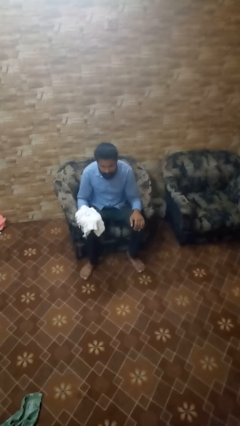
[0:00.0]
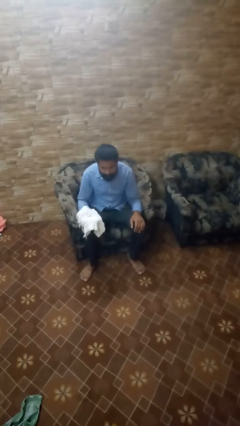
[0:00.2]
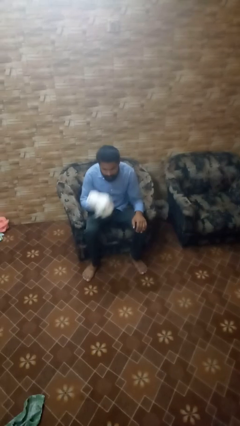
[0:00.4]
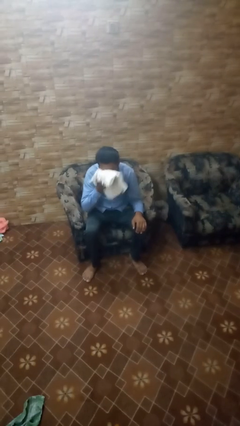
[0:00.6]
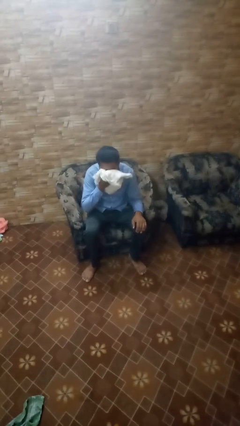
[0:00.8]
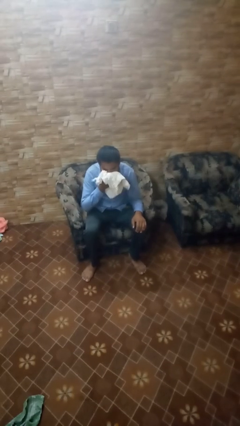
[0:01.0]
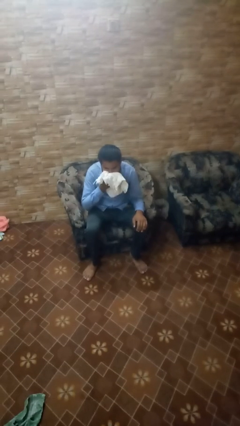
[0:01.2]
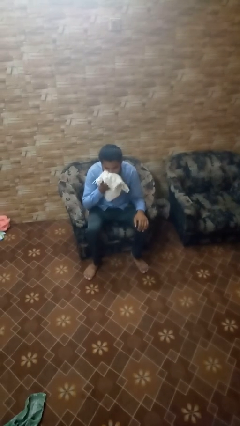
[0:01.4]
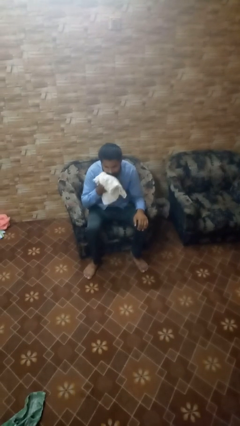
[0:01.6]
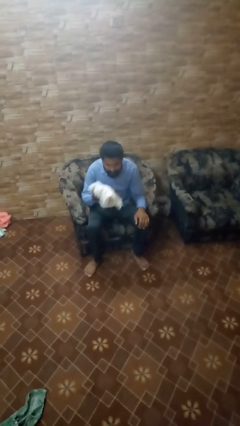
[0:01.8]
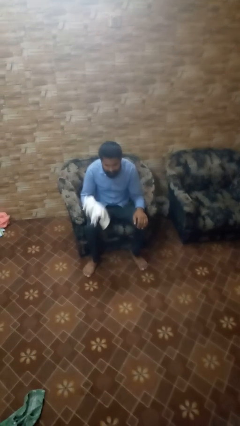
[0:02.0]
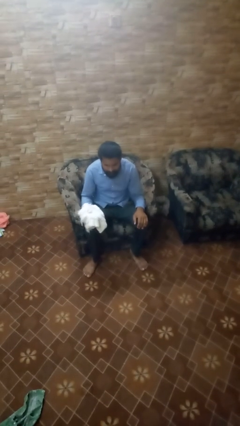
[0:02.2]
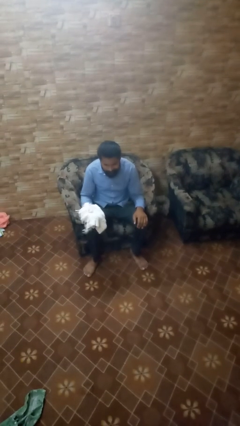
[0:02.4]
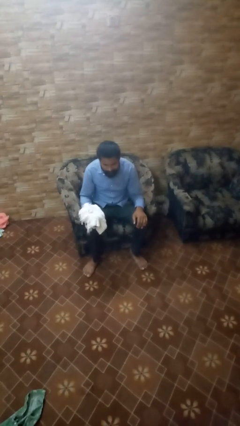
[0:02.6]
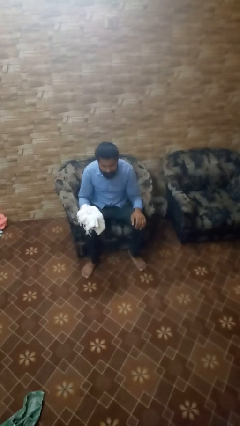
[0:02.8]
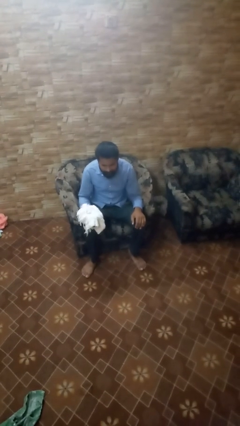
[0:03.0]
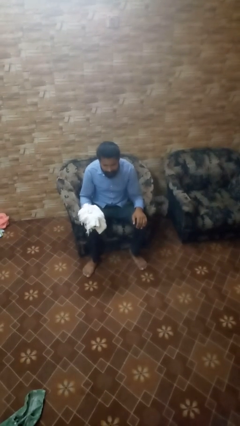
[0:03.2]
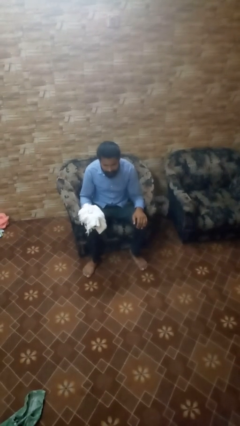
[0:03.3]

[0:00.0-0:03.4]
person wipes mouth with napkin

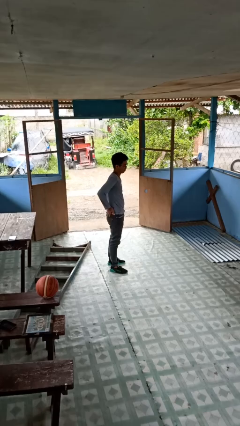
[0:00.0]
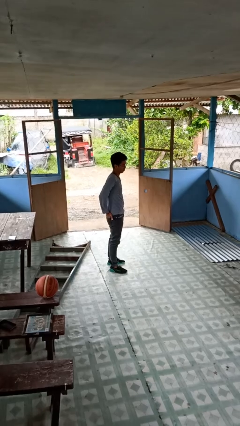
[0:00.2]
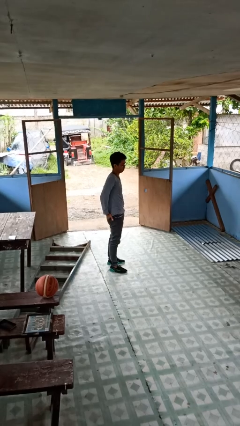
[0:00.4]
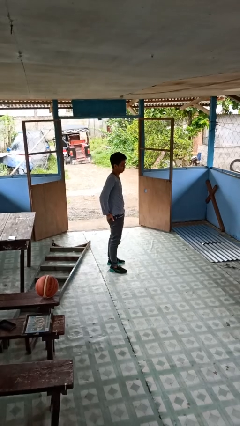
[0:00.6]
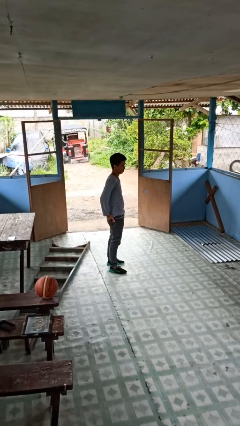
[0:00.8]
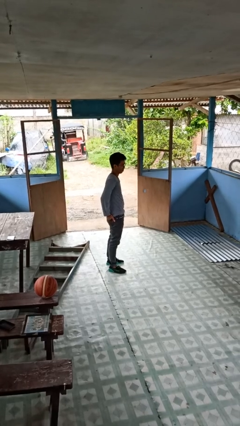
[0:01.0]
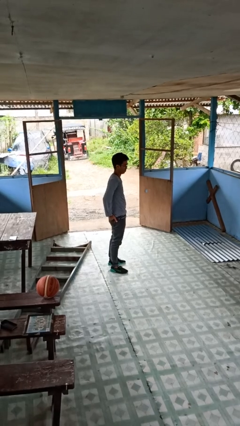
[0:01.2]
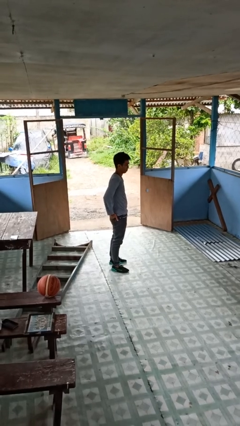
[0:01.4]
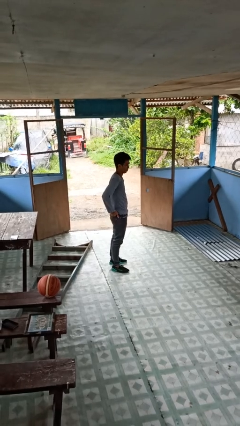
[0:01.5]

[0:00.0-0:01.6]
person puts hands in back pockets

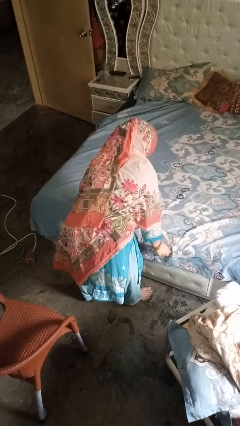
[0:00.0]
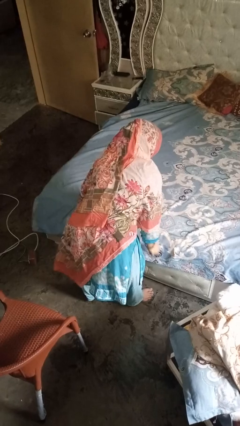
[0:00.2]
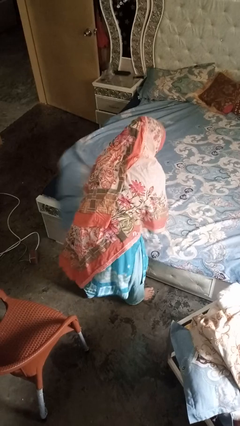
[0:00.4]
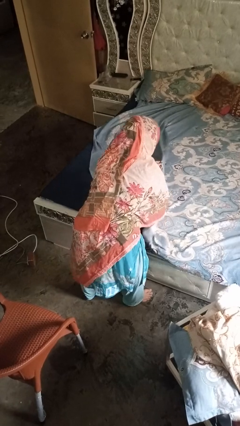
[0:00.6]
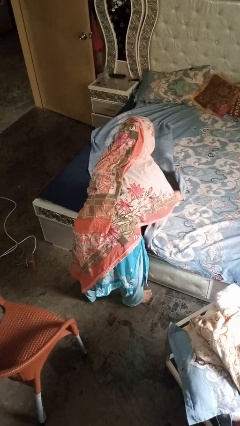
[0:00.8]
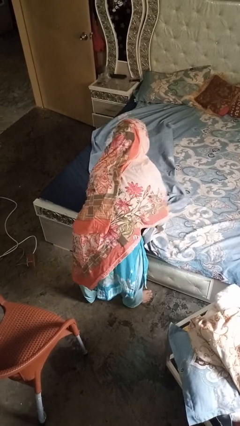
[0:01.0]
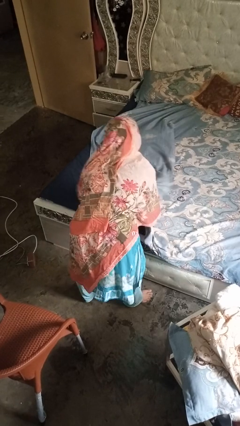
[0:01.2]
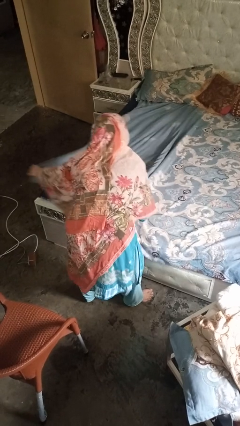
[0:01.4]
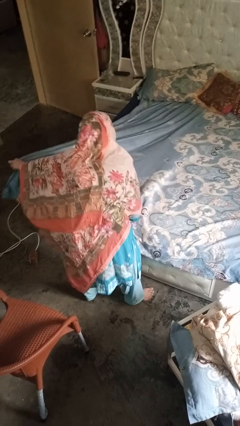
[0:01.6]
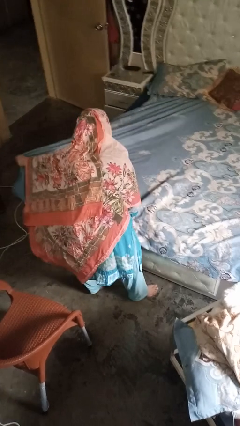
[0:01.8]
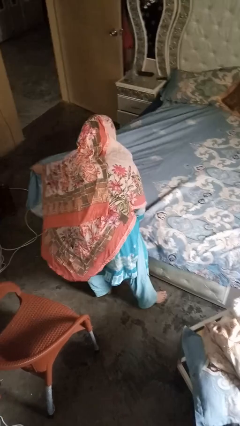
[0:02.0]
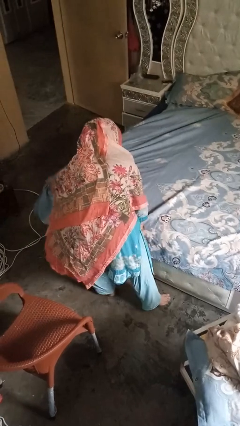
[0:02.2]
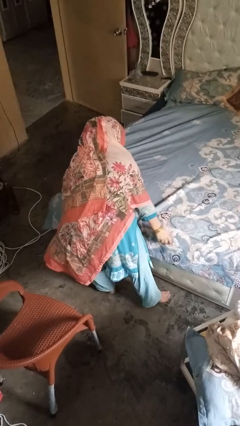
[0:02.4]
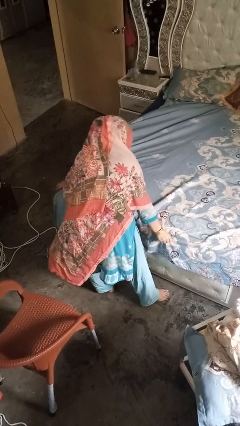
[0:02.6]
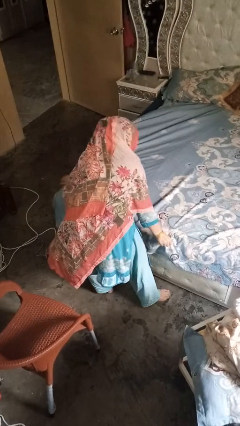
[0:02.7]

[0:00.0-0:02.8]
person makes bed

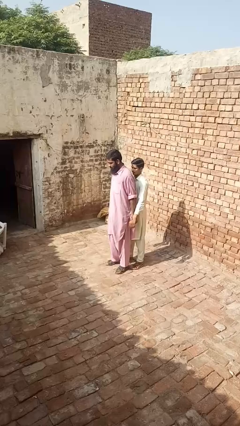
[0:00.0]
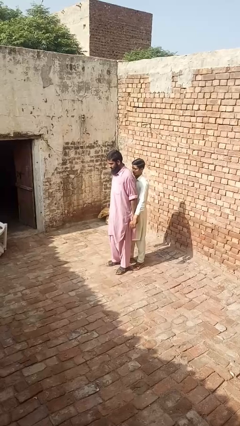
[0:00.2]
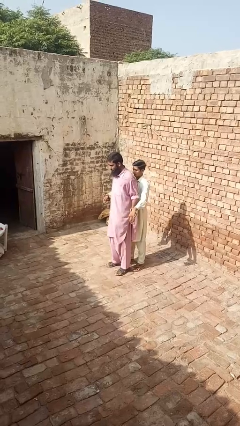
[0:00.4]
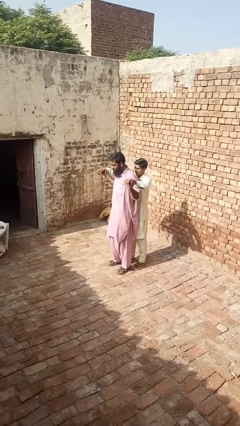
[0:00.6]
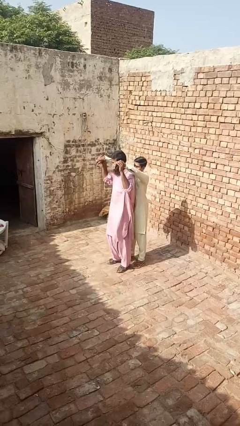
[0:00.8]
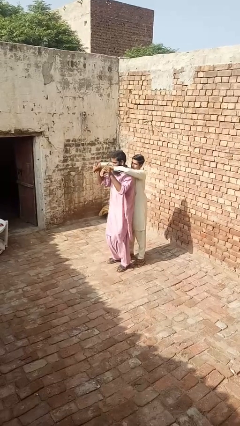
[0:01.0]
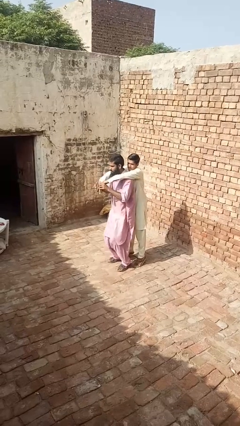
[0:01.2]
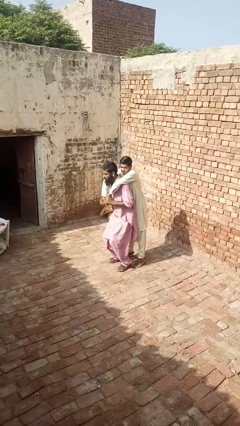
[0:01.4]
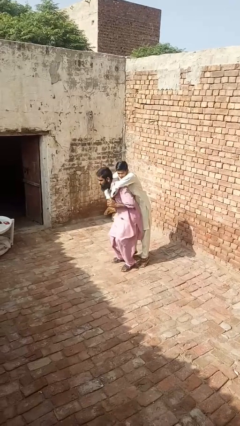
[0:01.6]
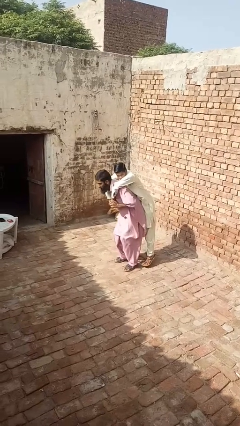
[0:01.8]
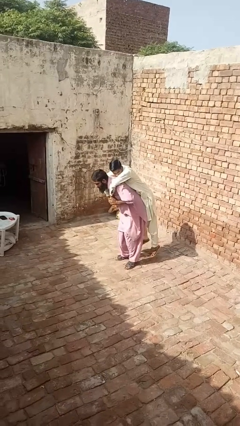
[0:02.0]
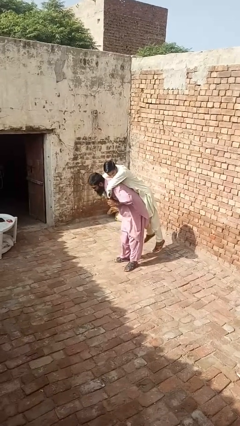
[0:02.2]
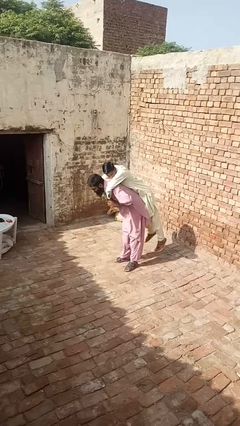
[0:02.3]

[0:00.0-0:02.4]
person carries person over shoulder

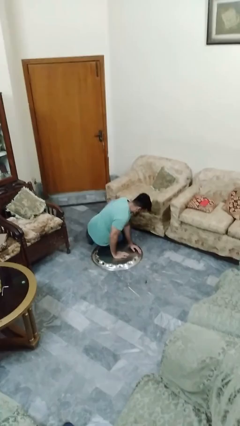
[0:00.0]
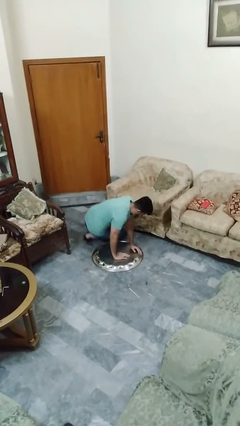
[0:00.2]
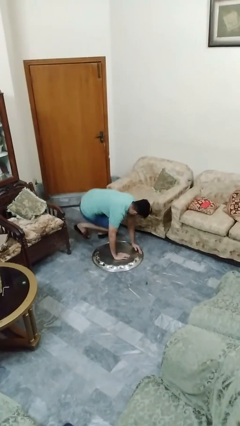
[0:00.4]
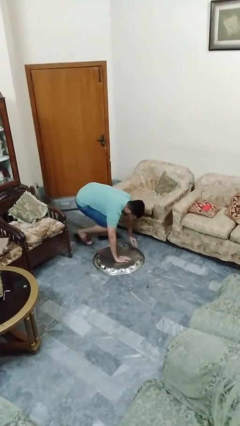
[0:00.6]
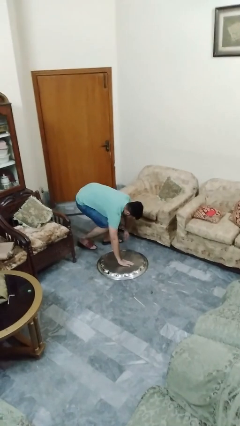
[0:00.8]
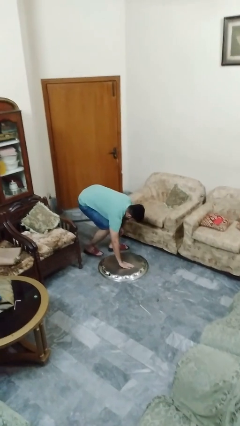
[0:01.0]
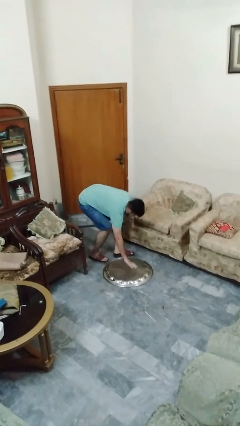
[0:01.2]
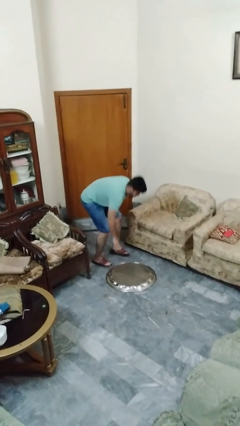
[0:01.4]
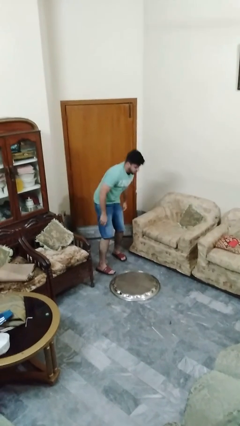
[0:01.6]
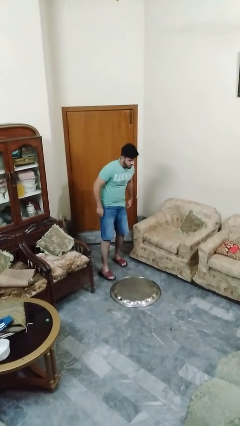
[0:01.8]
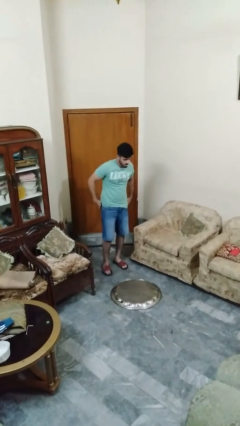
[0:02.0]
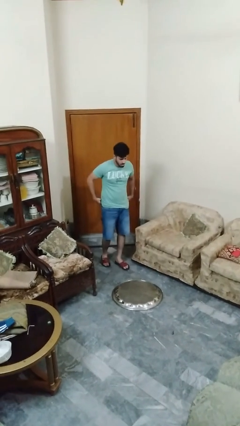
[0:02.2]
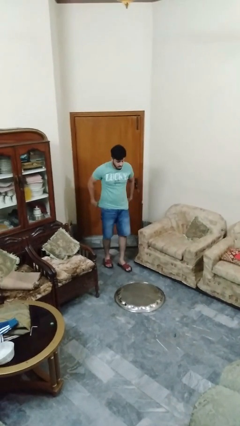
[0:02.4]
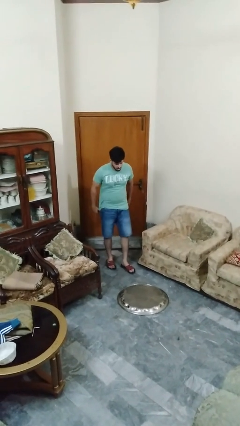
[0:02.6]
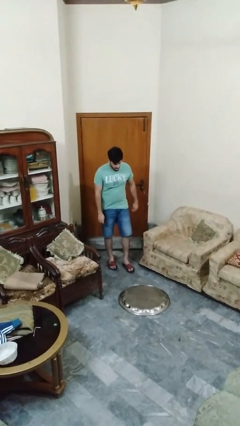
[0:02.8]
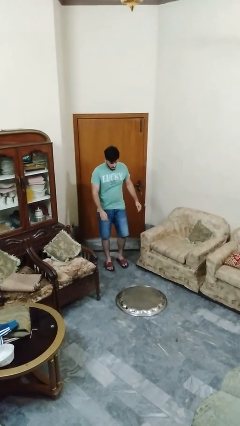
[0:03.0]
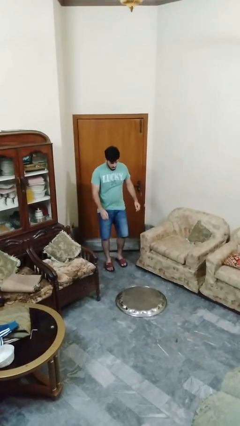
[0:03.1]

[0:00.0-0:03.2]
person stands up from floor

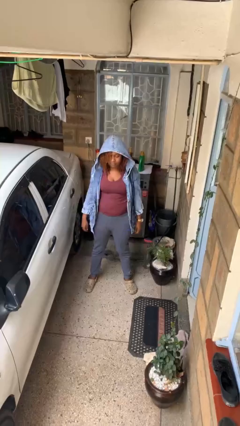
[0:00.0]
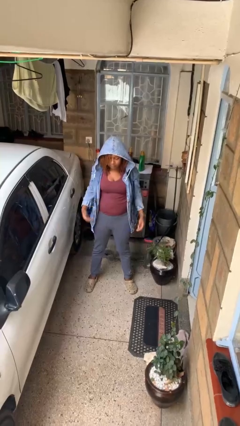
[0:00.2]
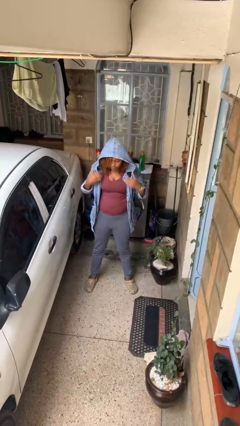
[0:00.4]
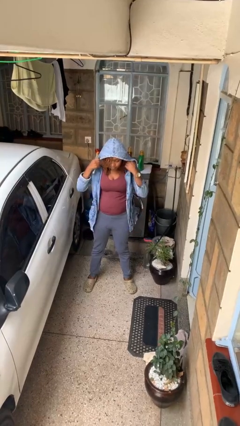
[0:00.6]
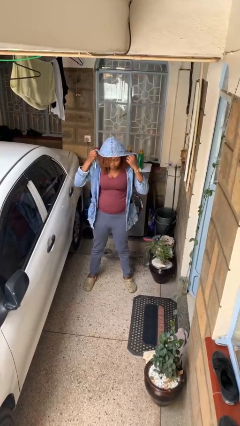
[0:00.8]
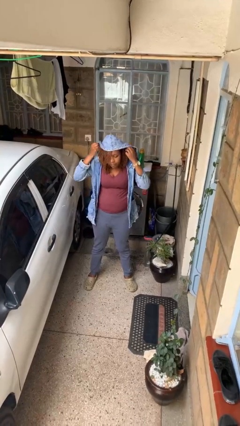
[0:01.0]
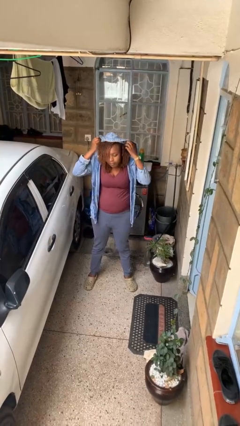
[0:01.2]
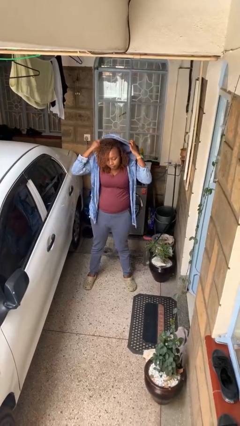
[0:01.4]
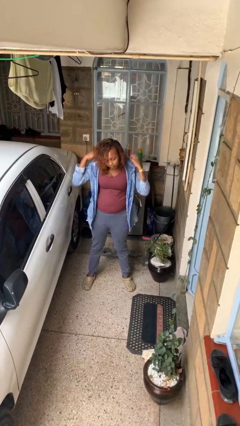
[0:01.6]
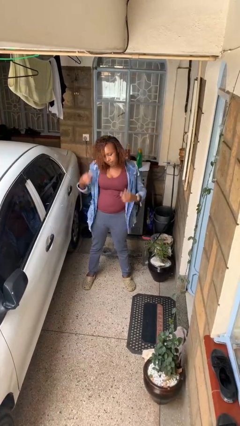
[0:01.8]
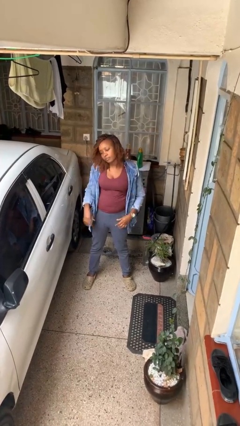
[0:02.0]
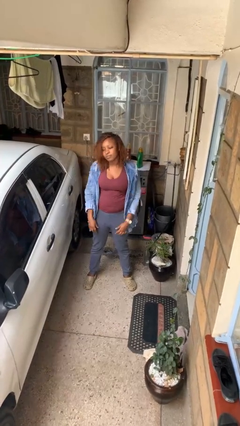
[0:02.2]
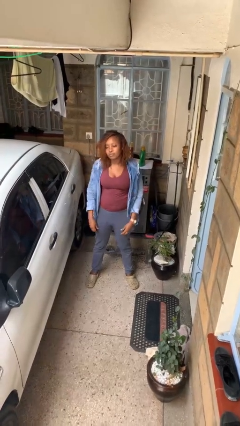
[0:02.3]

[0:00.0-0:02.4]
person takes off hoodie

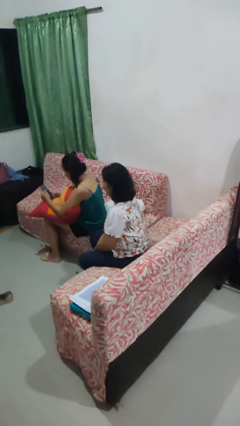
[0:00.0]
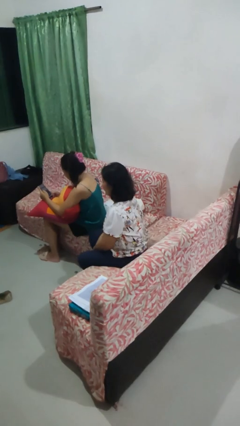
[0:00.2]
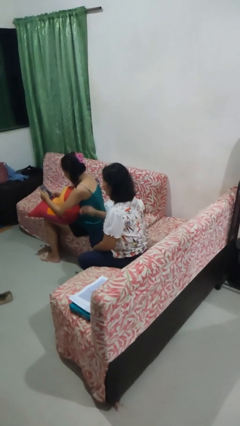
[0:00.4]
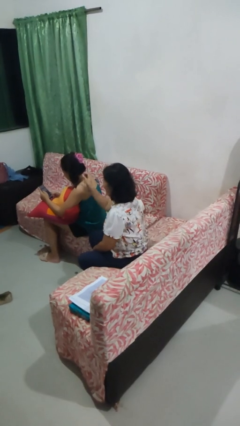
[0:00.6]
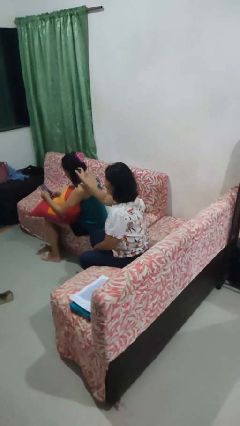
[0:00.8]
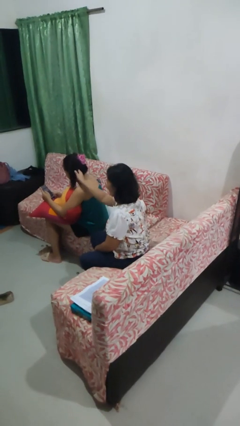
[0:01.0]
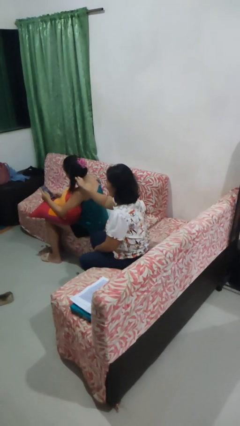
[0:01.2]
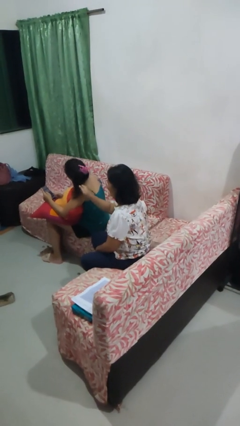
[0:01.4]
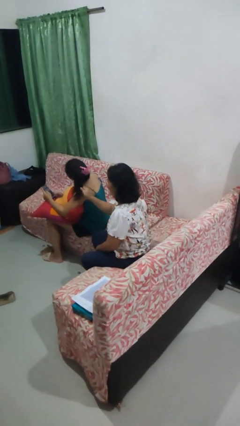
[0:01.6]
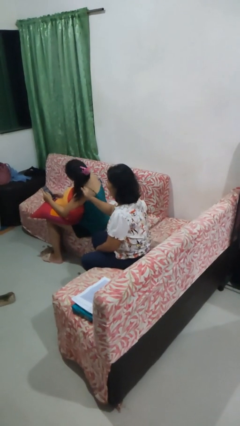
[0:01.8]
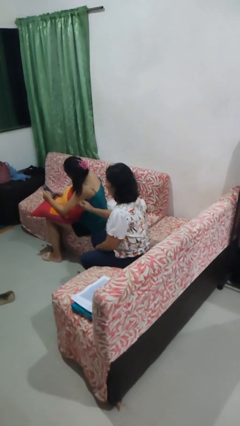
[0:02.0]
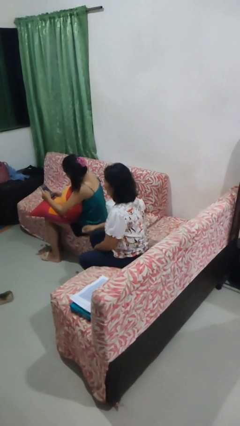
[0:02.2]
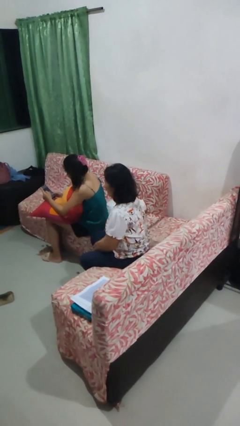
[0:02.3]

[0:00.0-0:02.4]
person grabs person by hair
